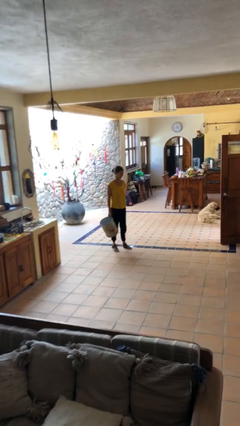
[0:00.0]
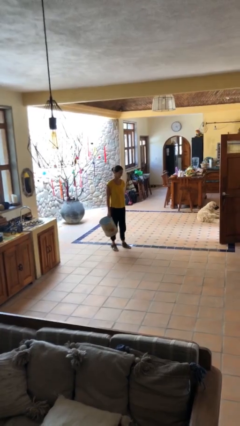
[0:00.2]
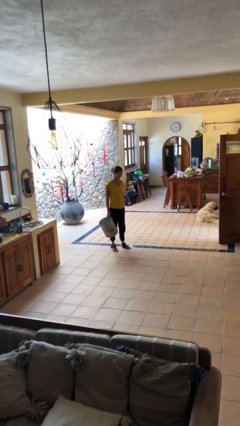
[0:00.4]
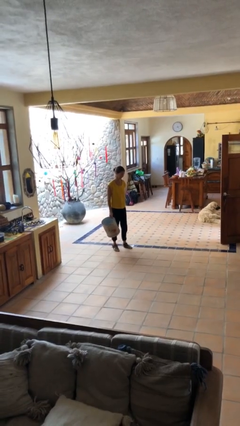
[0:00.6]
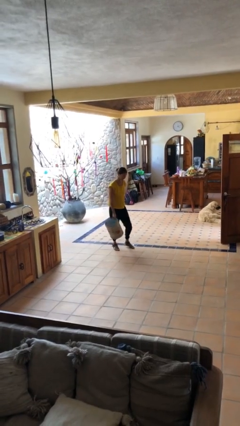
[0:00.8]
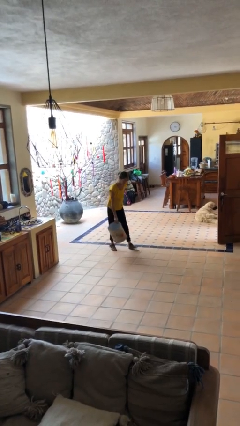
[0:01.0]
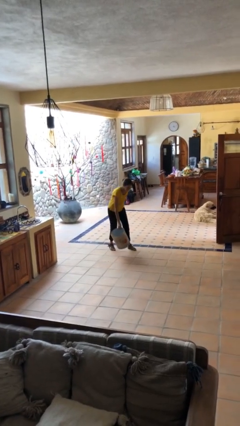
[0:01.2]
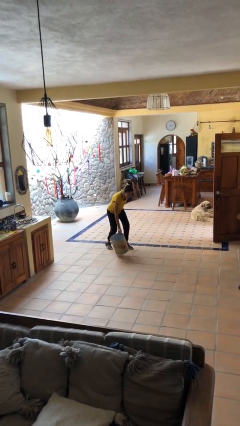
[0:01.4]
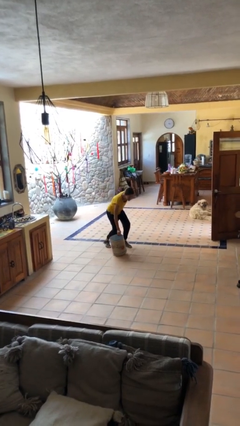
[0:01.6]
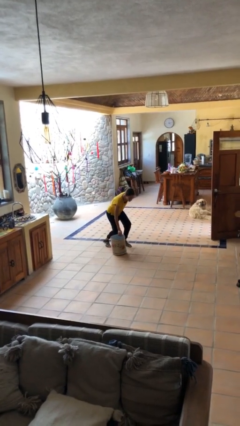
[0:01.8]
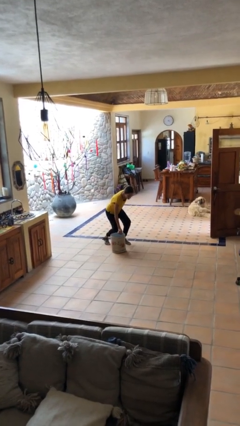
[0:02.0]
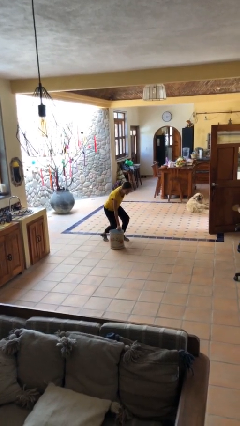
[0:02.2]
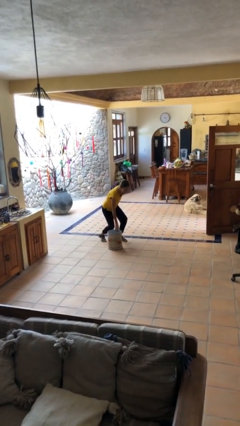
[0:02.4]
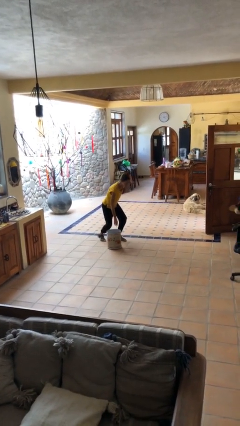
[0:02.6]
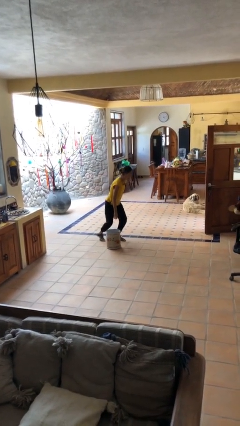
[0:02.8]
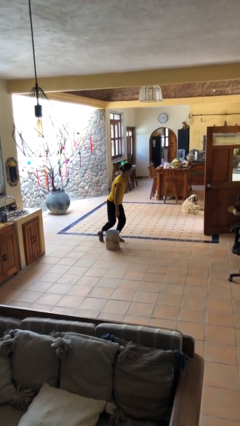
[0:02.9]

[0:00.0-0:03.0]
person puts down object on floor

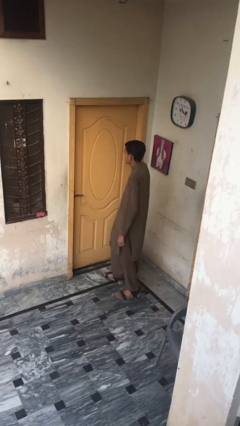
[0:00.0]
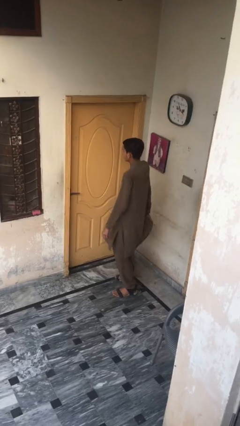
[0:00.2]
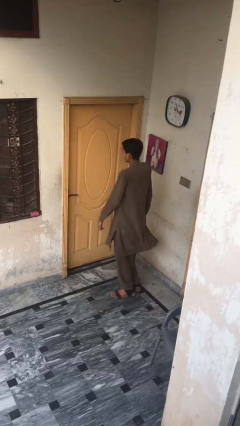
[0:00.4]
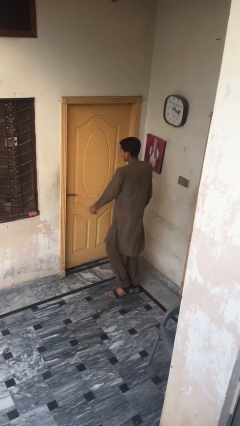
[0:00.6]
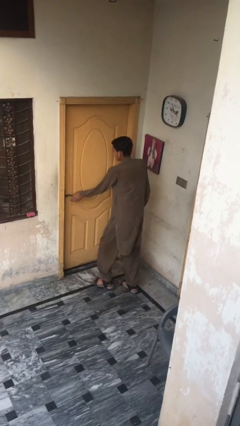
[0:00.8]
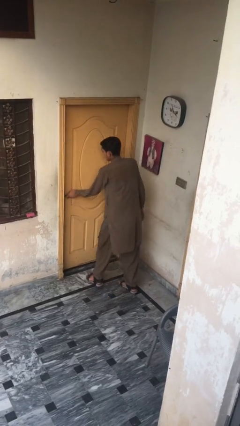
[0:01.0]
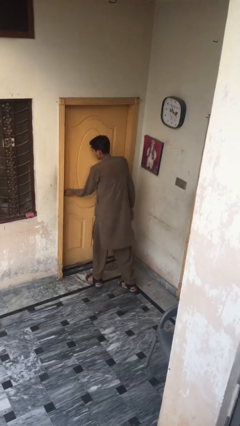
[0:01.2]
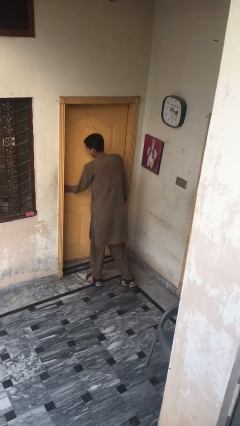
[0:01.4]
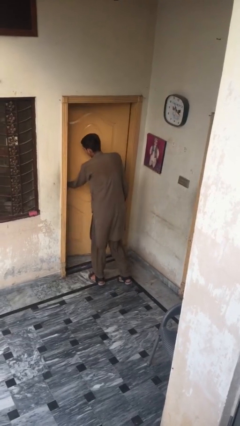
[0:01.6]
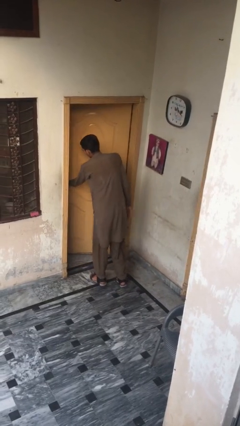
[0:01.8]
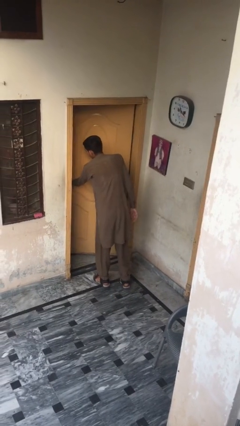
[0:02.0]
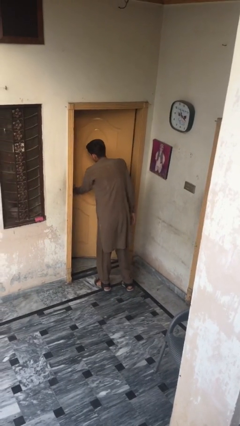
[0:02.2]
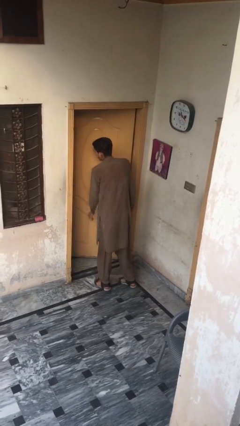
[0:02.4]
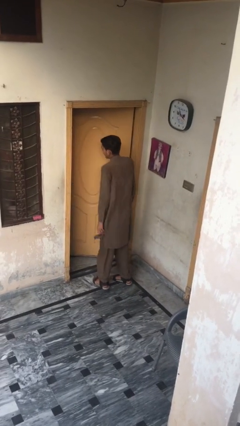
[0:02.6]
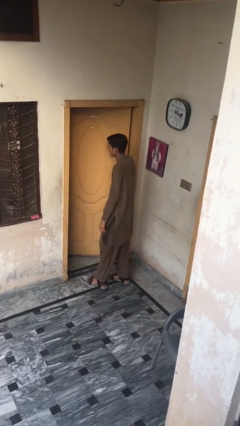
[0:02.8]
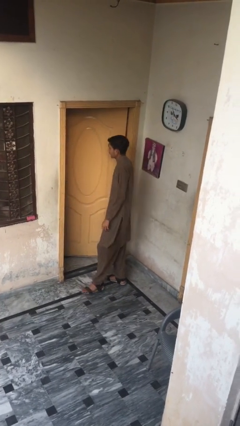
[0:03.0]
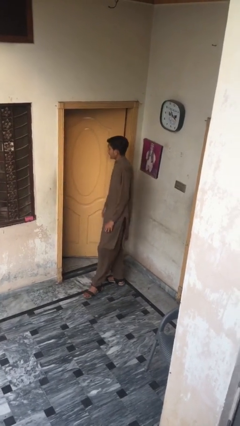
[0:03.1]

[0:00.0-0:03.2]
person opens facility door

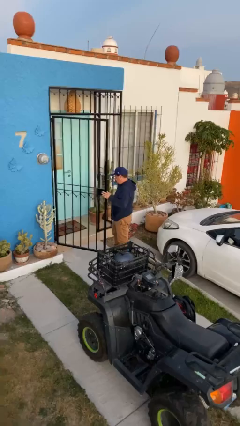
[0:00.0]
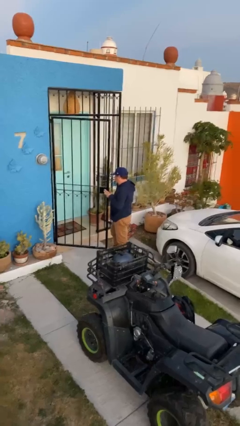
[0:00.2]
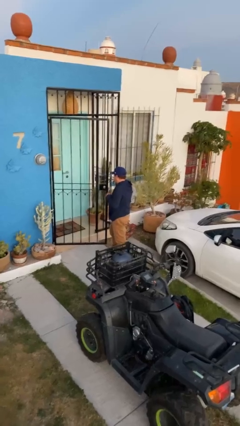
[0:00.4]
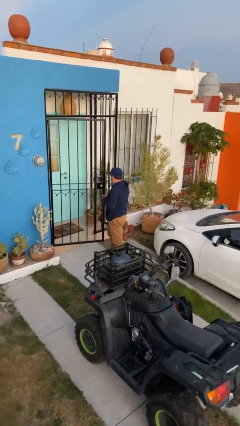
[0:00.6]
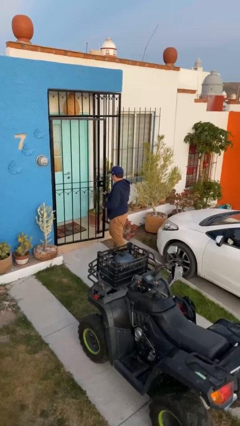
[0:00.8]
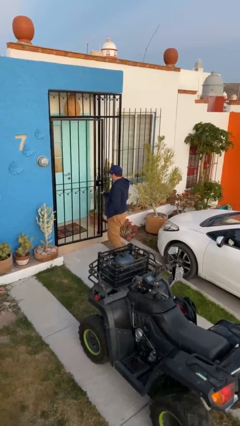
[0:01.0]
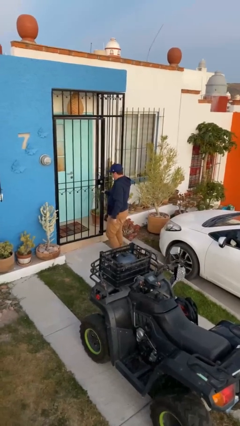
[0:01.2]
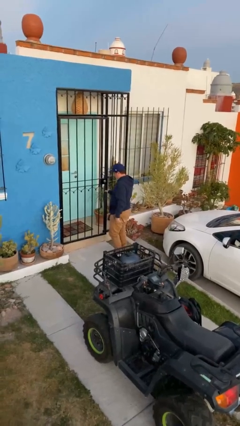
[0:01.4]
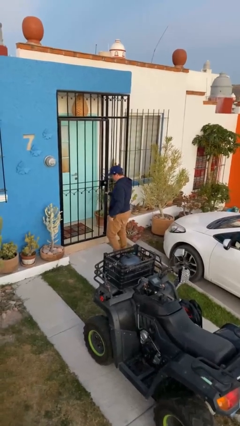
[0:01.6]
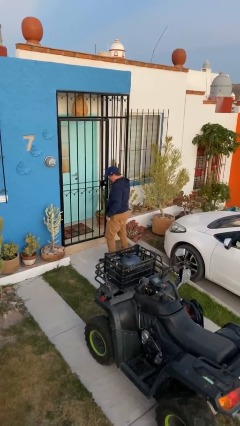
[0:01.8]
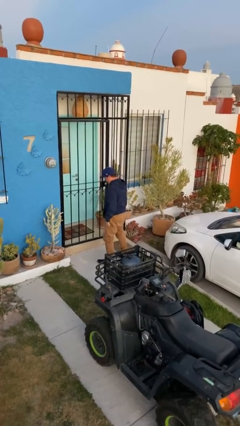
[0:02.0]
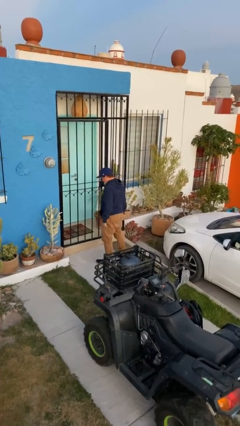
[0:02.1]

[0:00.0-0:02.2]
person closes facility door

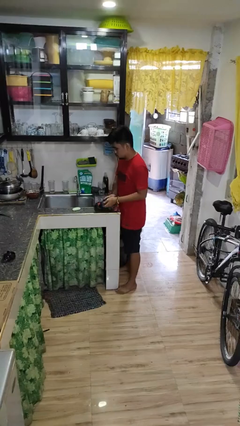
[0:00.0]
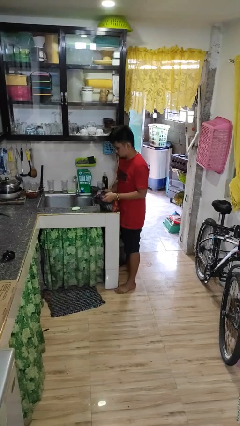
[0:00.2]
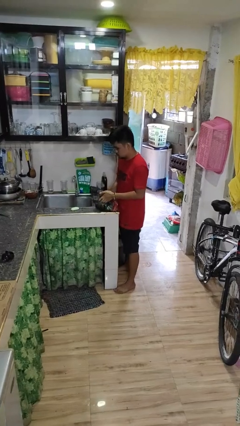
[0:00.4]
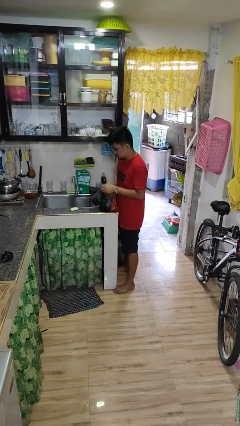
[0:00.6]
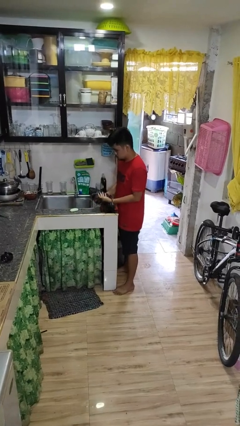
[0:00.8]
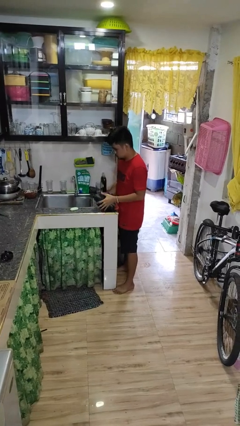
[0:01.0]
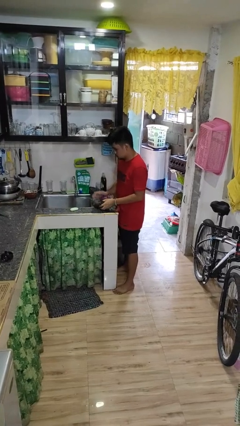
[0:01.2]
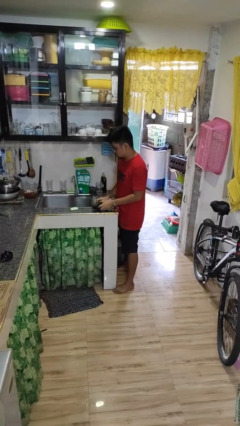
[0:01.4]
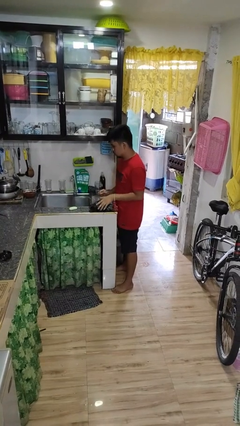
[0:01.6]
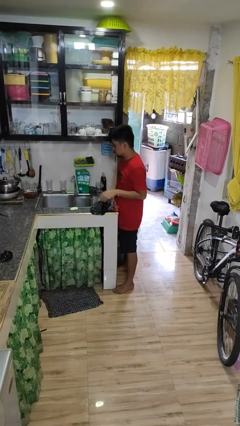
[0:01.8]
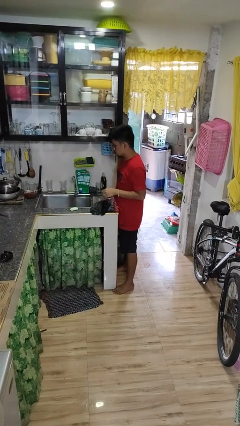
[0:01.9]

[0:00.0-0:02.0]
person dries hands with towel

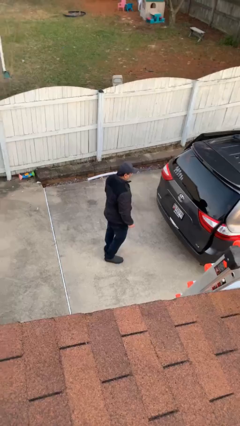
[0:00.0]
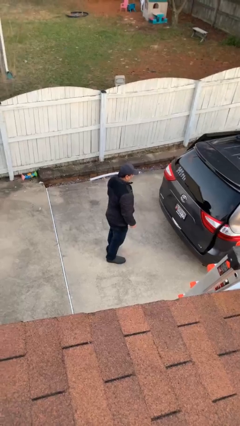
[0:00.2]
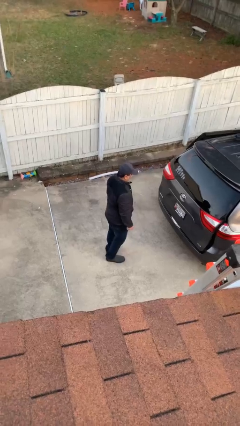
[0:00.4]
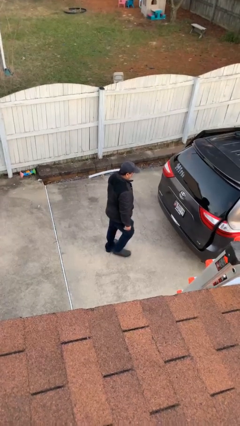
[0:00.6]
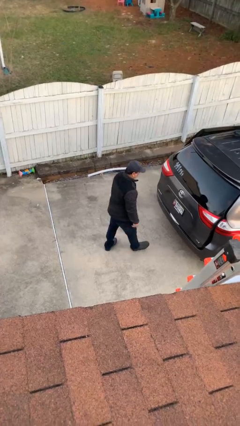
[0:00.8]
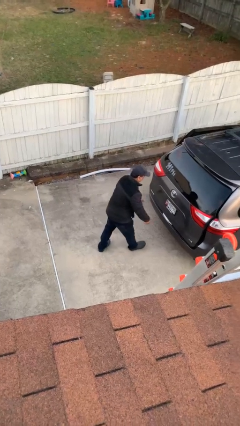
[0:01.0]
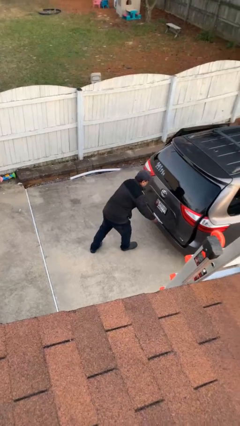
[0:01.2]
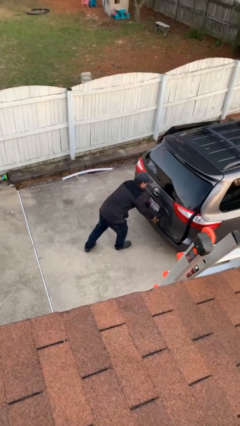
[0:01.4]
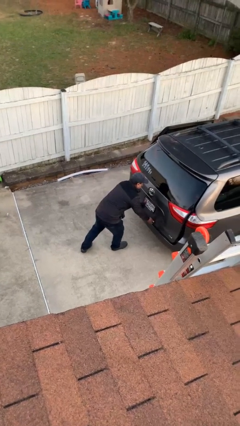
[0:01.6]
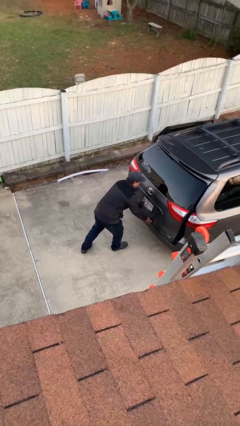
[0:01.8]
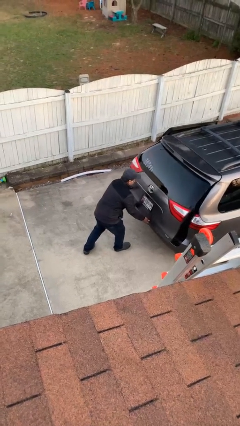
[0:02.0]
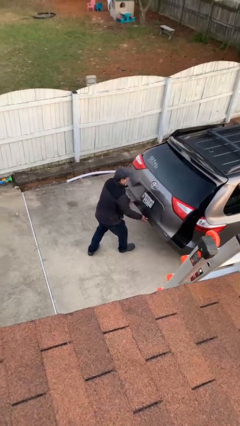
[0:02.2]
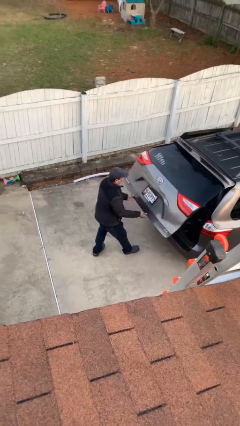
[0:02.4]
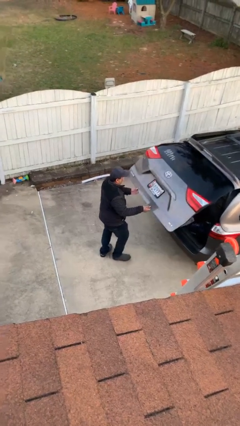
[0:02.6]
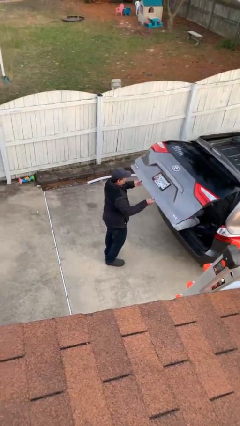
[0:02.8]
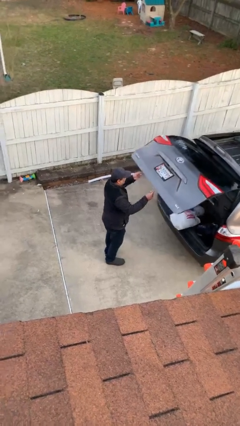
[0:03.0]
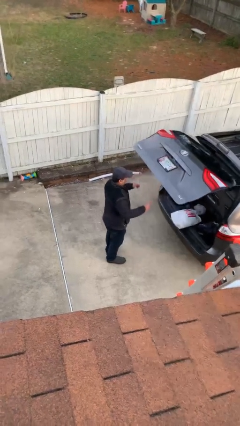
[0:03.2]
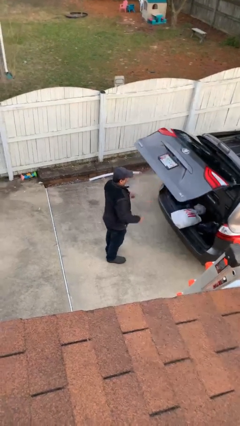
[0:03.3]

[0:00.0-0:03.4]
person opens car trunk

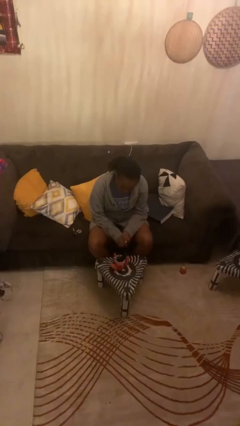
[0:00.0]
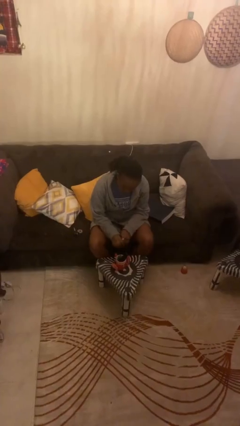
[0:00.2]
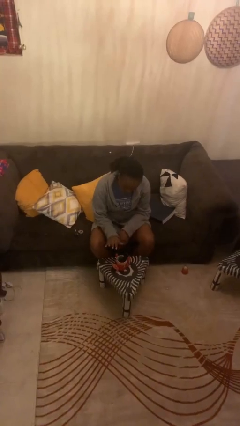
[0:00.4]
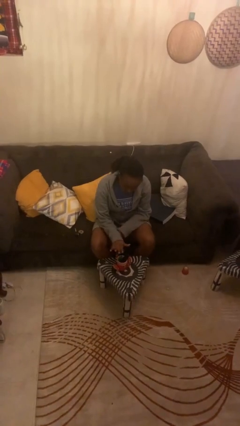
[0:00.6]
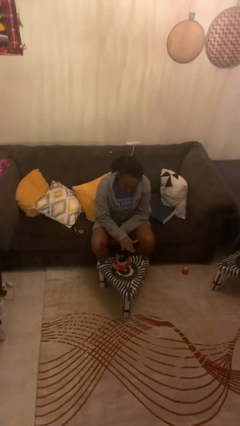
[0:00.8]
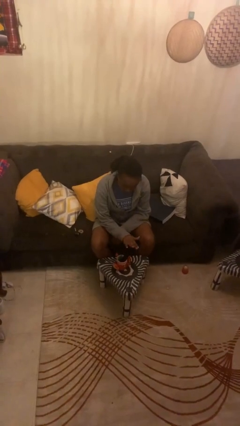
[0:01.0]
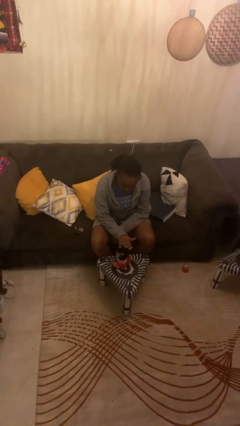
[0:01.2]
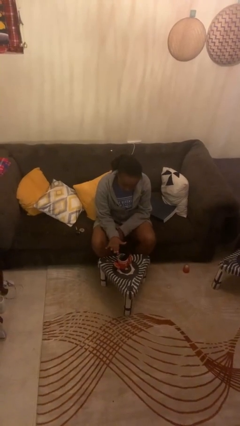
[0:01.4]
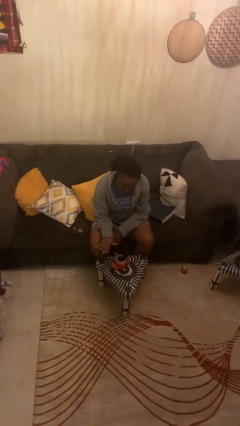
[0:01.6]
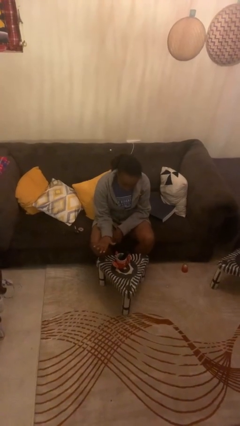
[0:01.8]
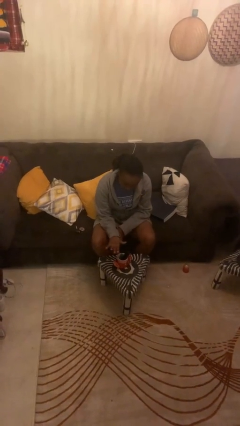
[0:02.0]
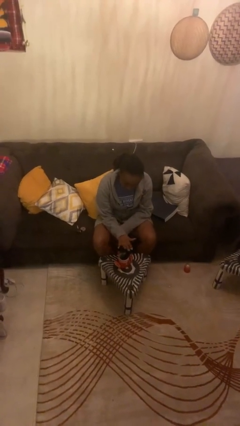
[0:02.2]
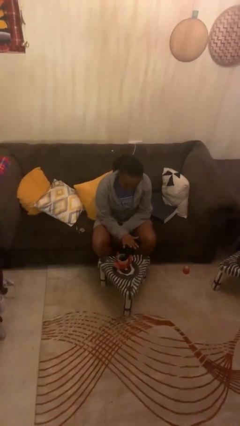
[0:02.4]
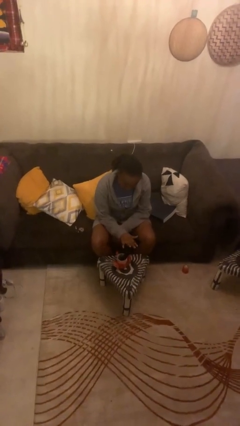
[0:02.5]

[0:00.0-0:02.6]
person waves hand over object

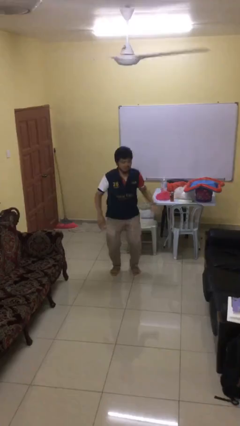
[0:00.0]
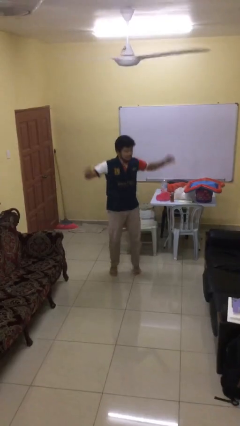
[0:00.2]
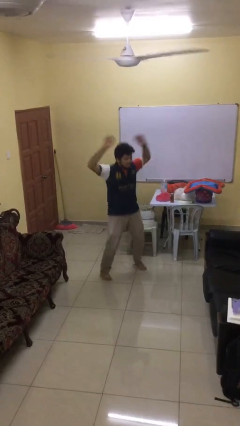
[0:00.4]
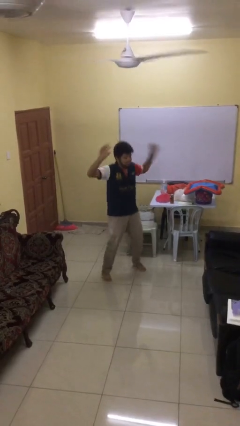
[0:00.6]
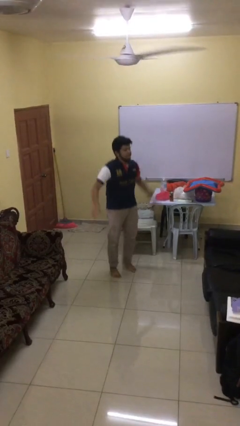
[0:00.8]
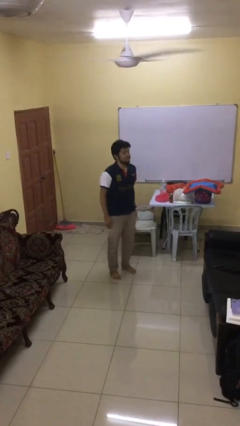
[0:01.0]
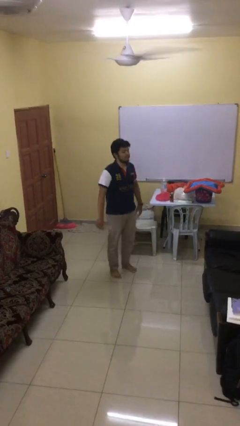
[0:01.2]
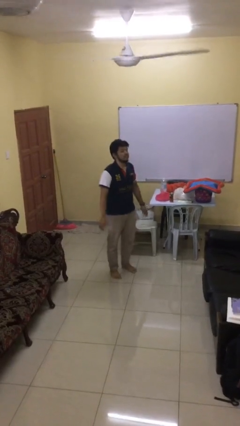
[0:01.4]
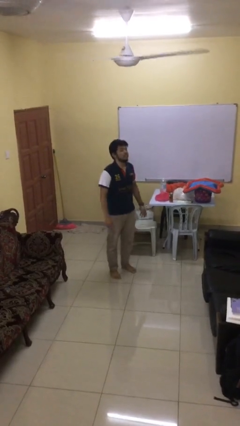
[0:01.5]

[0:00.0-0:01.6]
person exercises with jumping jacks
